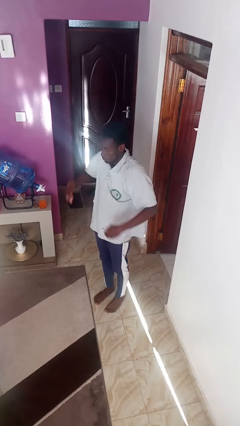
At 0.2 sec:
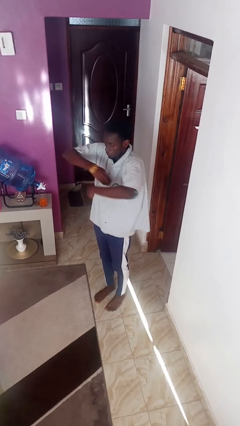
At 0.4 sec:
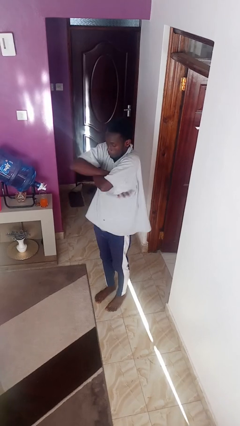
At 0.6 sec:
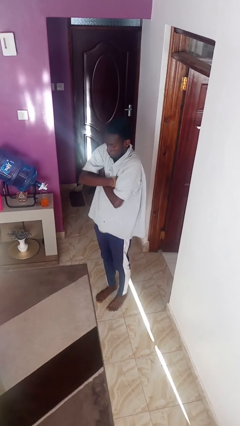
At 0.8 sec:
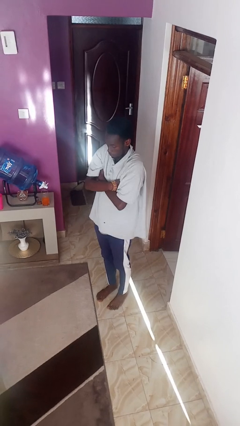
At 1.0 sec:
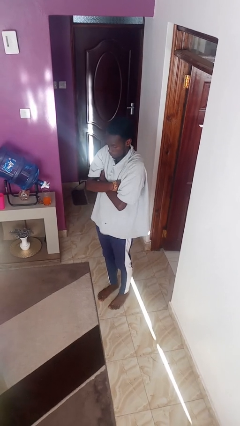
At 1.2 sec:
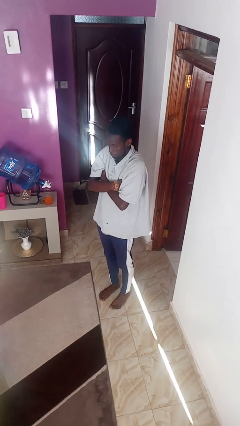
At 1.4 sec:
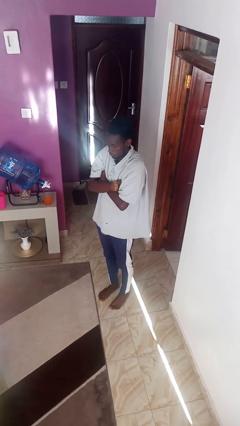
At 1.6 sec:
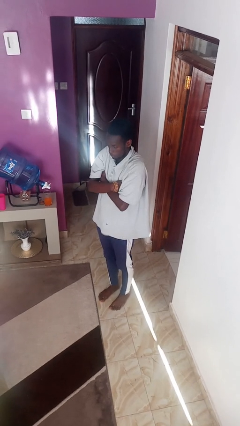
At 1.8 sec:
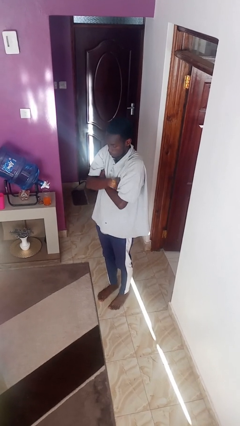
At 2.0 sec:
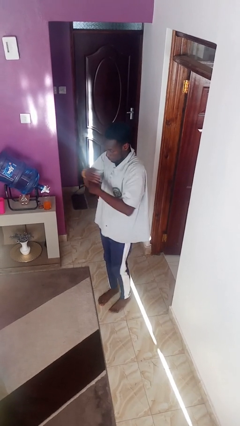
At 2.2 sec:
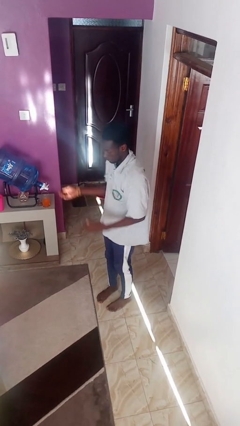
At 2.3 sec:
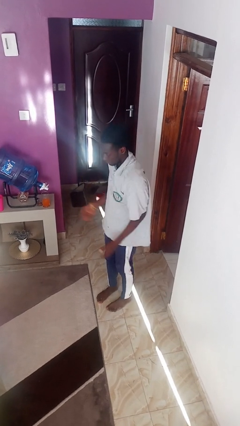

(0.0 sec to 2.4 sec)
person crosses arms

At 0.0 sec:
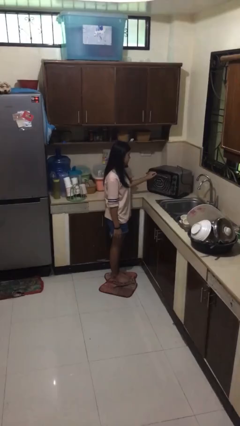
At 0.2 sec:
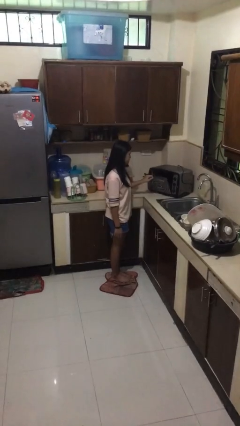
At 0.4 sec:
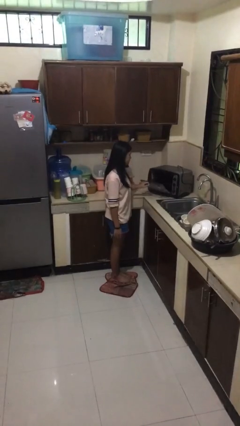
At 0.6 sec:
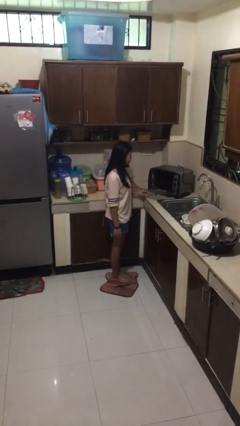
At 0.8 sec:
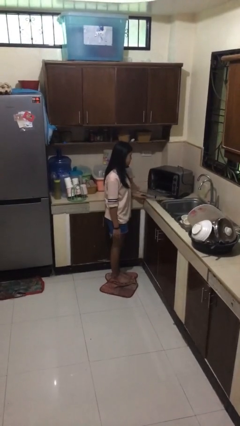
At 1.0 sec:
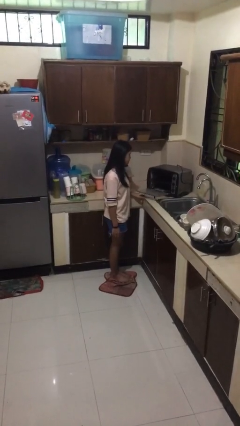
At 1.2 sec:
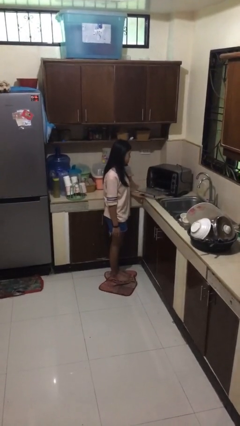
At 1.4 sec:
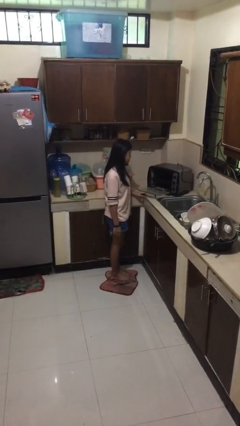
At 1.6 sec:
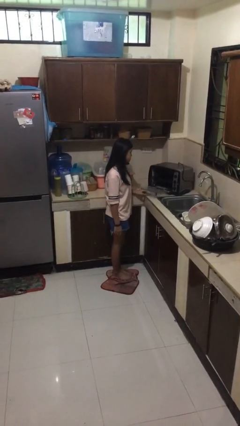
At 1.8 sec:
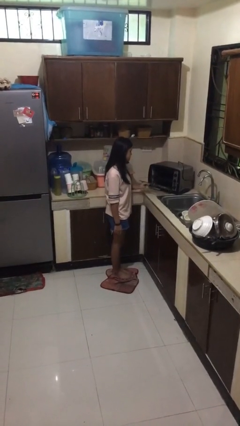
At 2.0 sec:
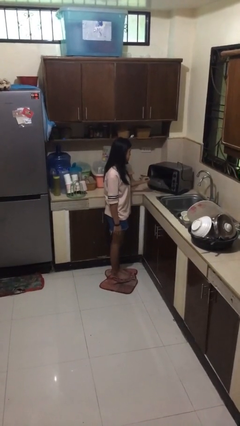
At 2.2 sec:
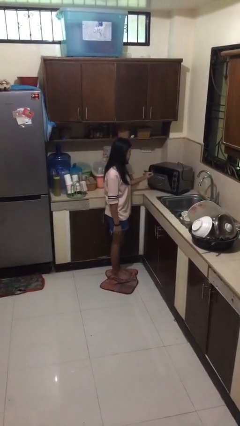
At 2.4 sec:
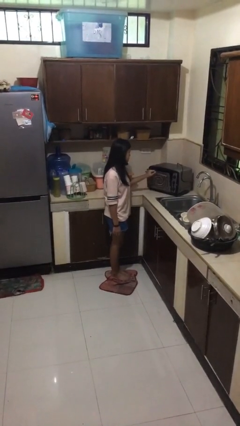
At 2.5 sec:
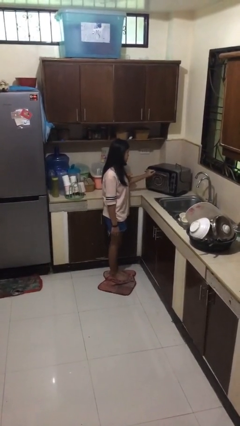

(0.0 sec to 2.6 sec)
person opens microwave

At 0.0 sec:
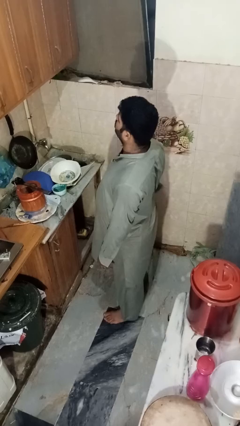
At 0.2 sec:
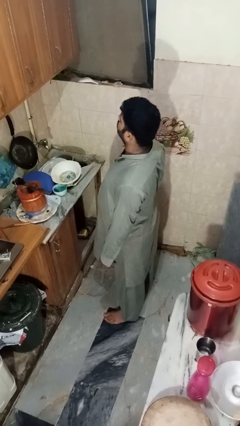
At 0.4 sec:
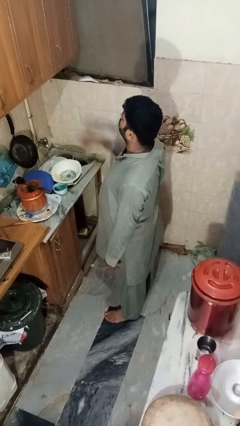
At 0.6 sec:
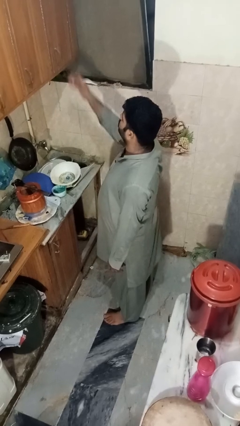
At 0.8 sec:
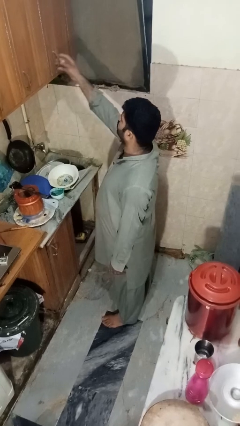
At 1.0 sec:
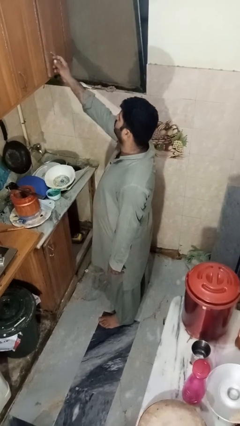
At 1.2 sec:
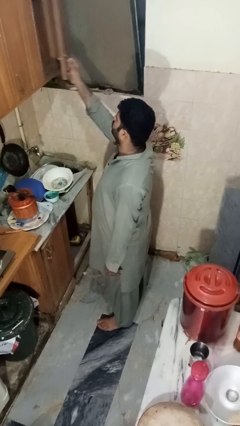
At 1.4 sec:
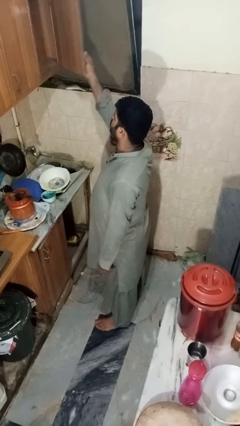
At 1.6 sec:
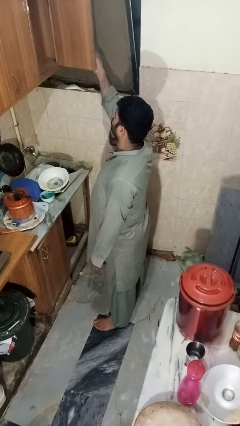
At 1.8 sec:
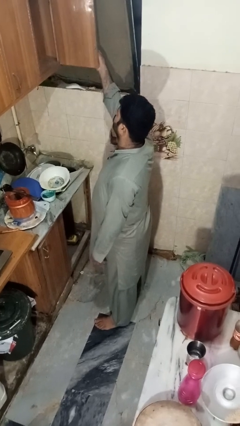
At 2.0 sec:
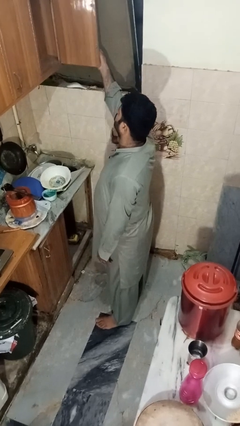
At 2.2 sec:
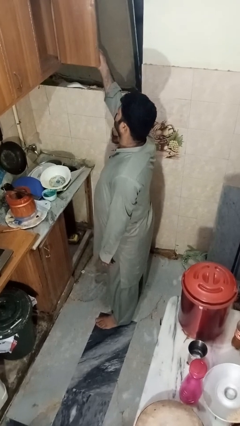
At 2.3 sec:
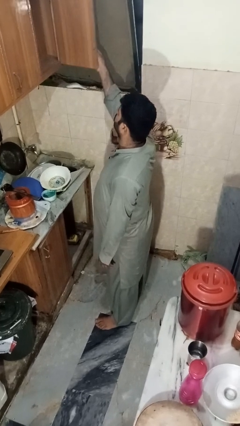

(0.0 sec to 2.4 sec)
person opens cabinet

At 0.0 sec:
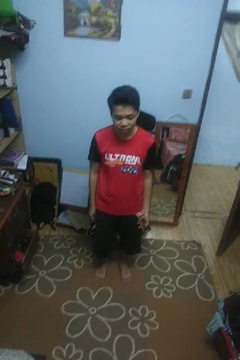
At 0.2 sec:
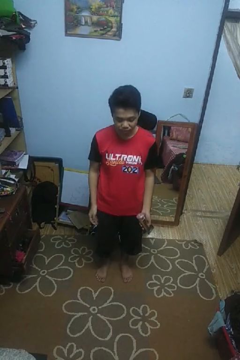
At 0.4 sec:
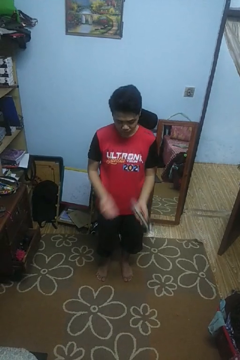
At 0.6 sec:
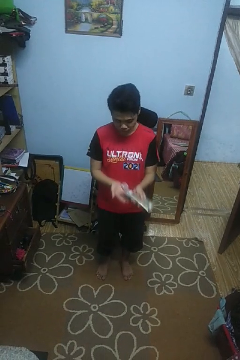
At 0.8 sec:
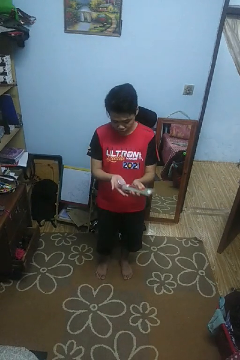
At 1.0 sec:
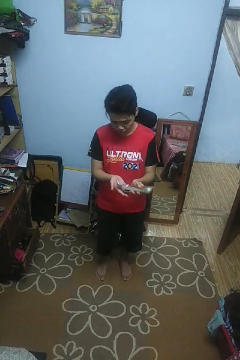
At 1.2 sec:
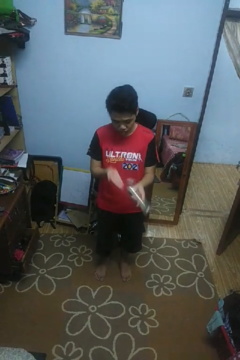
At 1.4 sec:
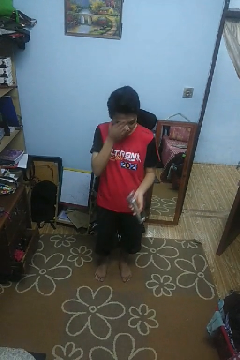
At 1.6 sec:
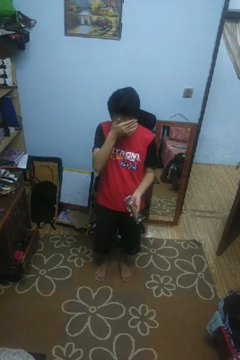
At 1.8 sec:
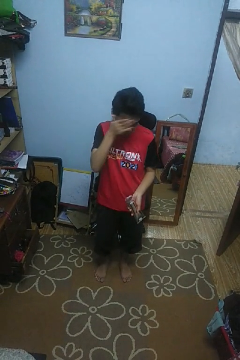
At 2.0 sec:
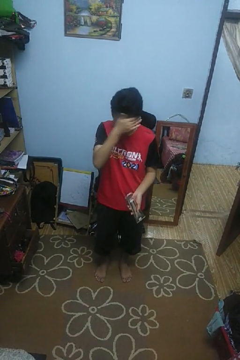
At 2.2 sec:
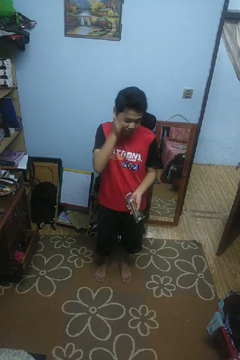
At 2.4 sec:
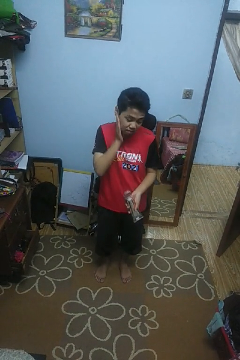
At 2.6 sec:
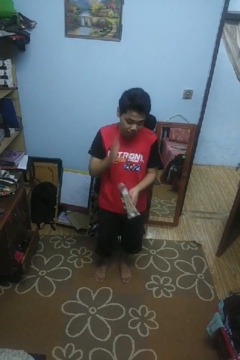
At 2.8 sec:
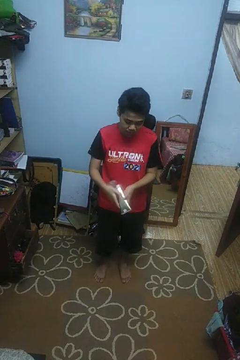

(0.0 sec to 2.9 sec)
person applies sunscreen

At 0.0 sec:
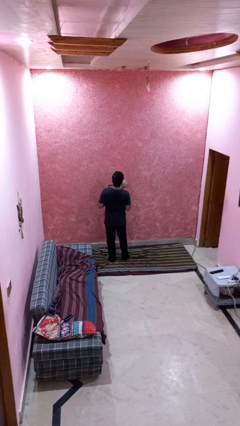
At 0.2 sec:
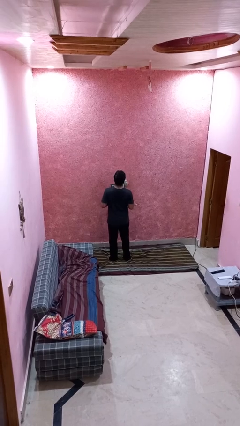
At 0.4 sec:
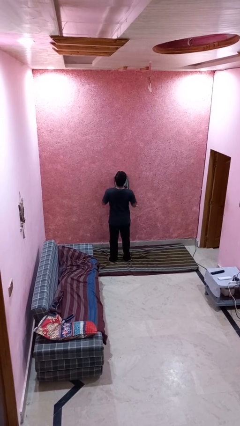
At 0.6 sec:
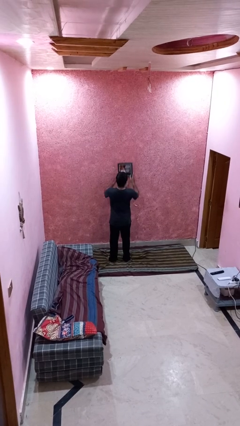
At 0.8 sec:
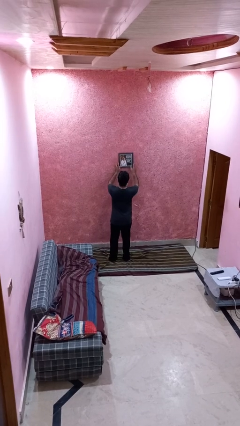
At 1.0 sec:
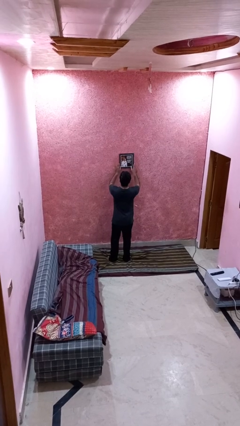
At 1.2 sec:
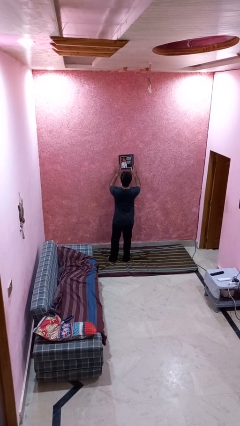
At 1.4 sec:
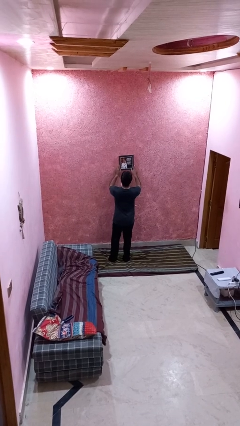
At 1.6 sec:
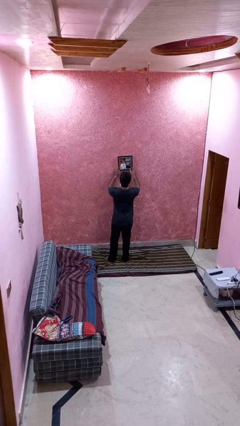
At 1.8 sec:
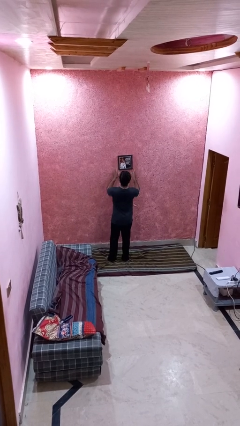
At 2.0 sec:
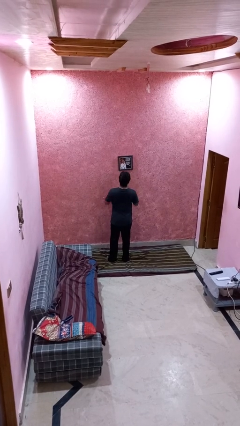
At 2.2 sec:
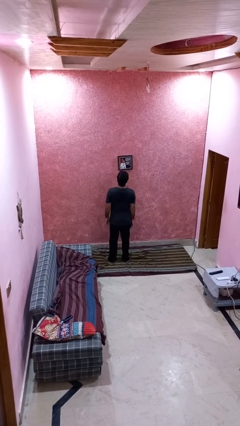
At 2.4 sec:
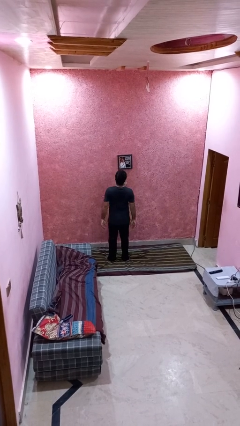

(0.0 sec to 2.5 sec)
person puts up picture frame

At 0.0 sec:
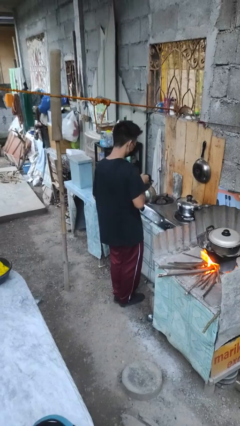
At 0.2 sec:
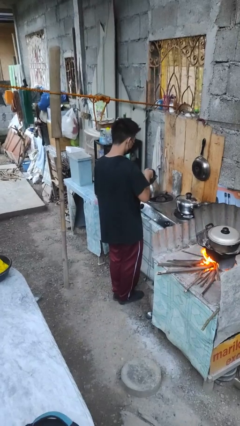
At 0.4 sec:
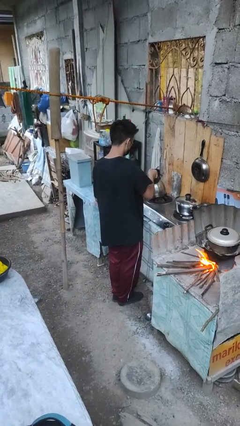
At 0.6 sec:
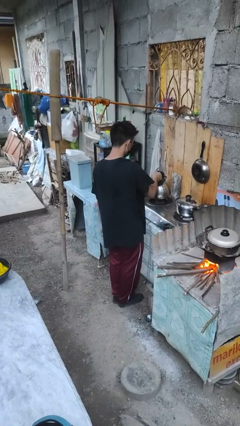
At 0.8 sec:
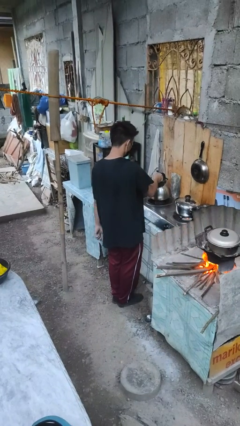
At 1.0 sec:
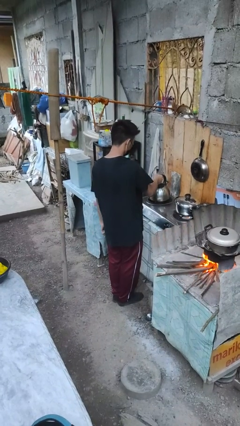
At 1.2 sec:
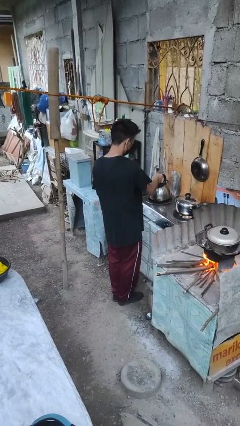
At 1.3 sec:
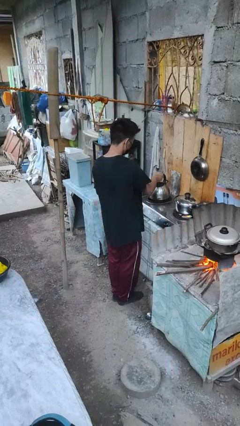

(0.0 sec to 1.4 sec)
person puts down object on countertop
